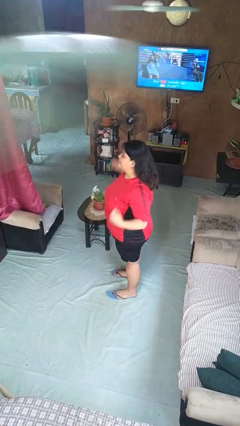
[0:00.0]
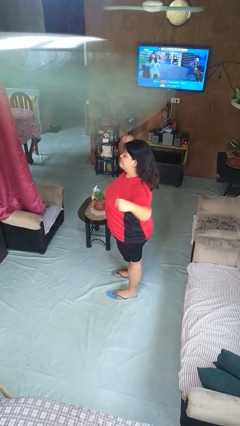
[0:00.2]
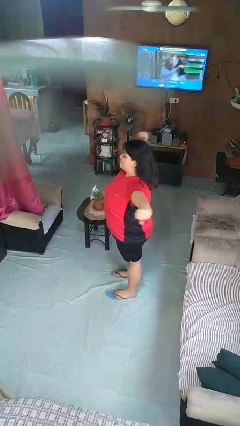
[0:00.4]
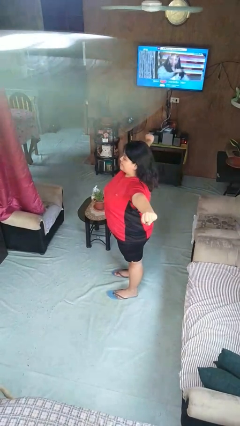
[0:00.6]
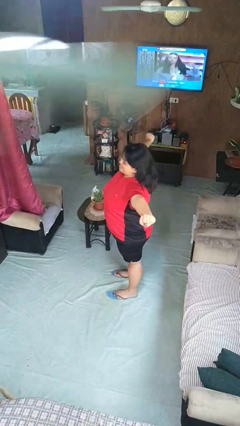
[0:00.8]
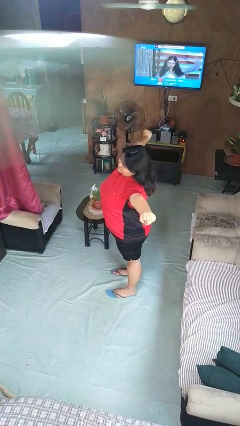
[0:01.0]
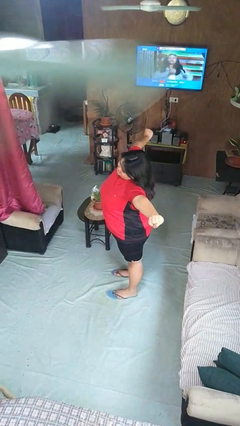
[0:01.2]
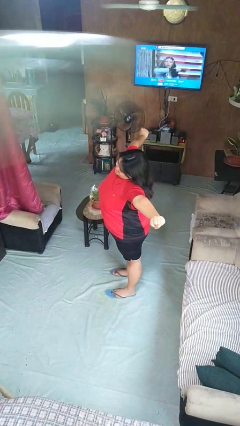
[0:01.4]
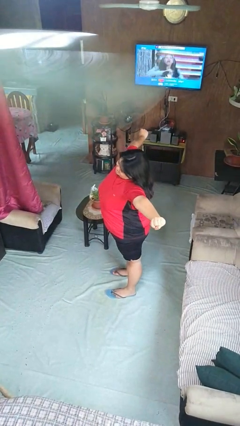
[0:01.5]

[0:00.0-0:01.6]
person stretches arms to side

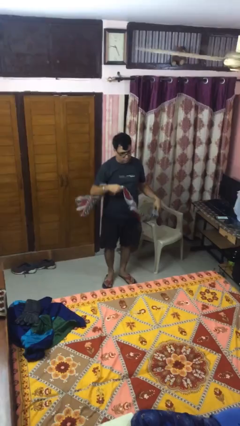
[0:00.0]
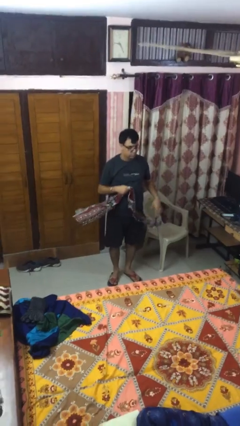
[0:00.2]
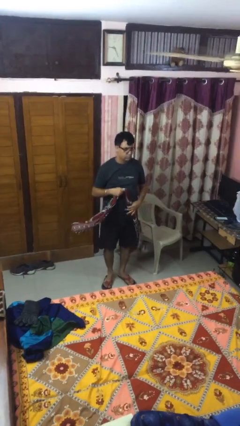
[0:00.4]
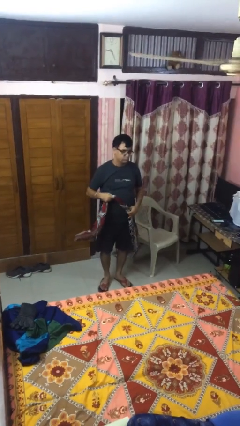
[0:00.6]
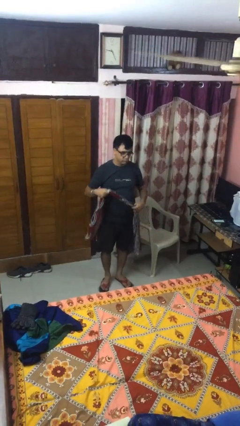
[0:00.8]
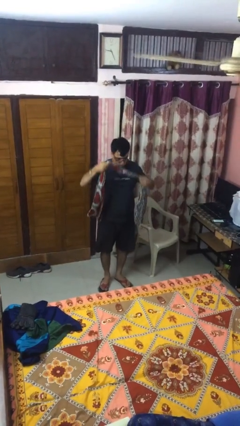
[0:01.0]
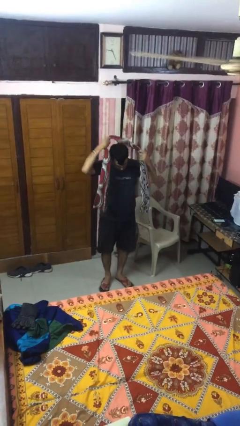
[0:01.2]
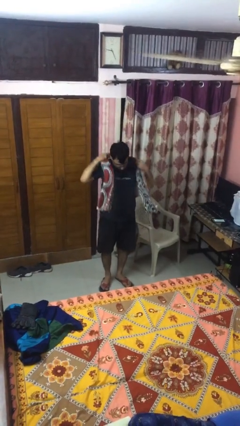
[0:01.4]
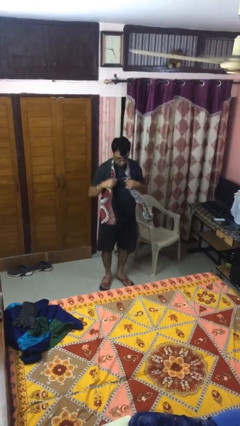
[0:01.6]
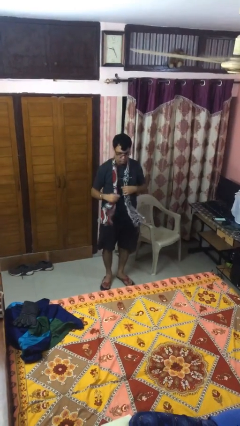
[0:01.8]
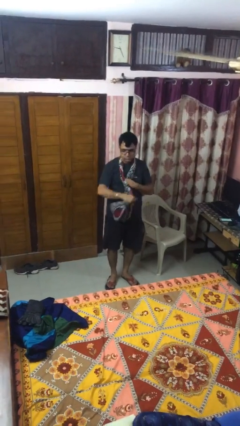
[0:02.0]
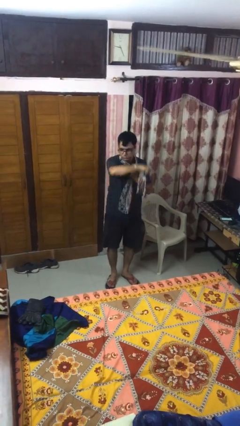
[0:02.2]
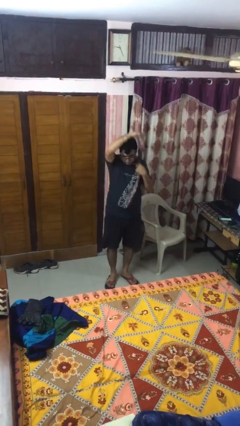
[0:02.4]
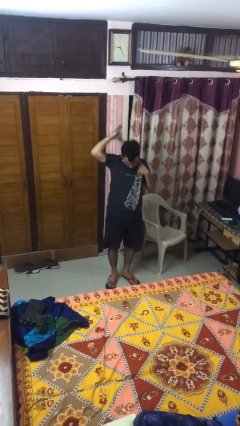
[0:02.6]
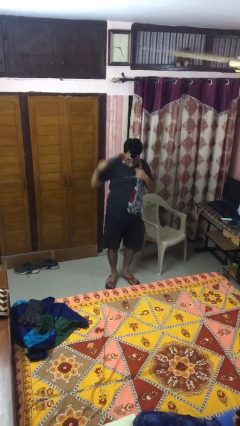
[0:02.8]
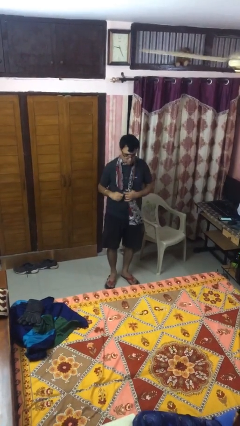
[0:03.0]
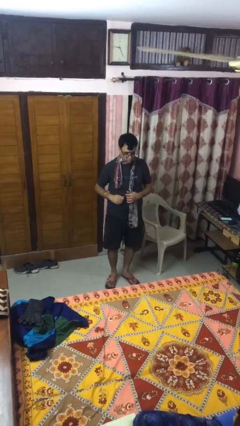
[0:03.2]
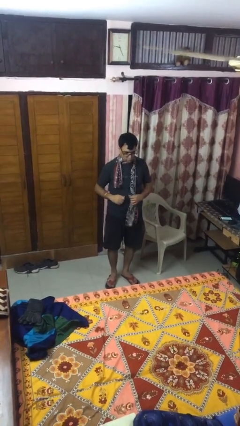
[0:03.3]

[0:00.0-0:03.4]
person puts on scarf

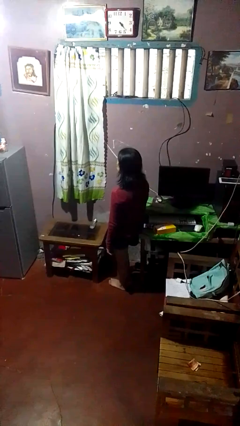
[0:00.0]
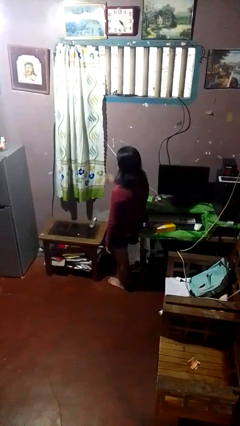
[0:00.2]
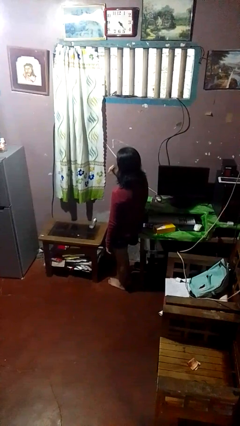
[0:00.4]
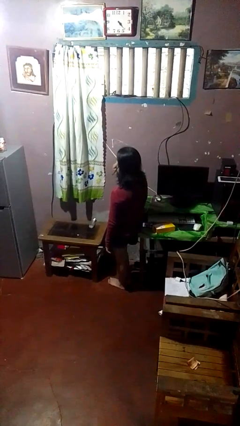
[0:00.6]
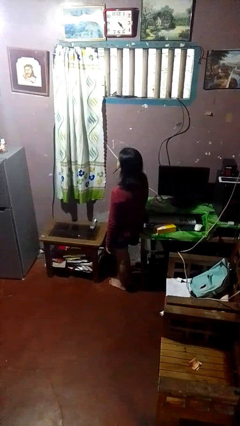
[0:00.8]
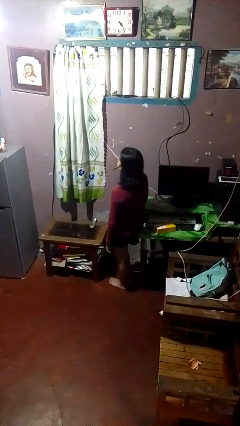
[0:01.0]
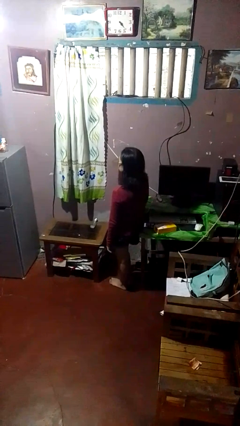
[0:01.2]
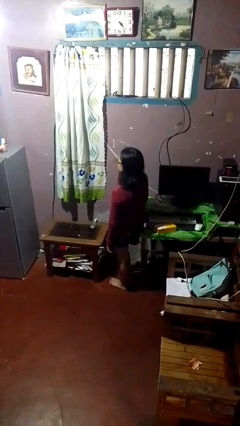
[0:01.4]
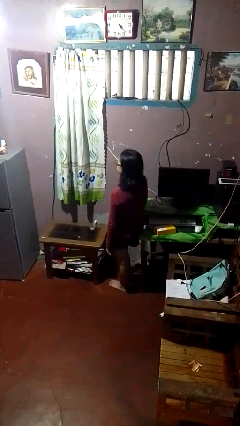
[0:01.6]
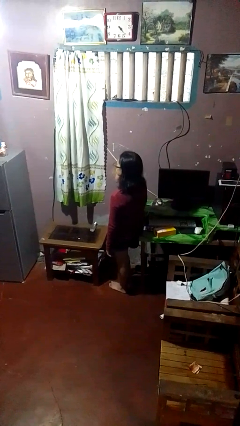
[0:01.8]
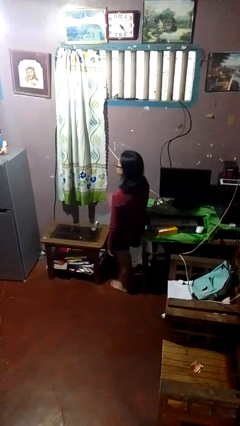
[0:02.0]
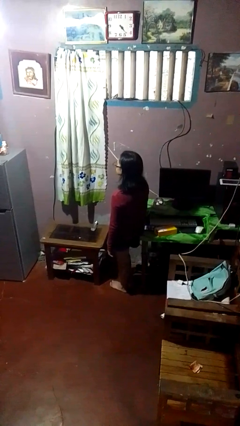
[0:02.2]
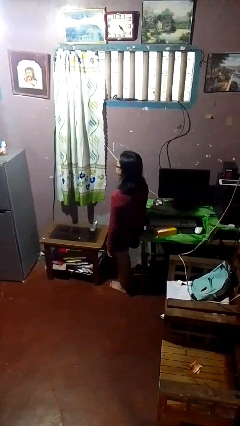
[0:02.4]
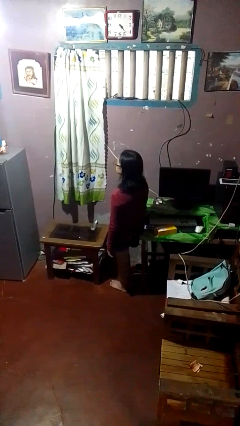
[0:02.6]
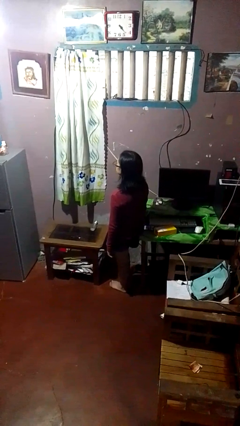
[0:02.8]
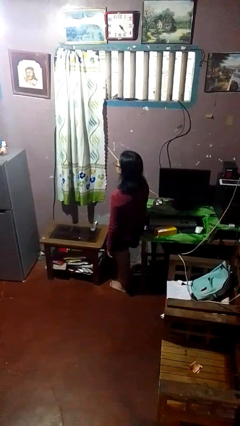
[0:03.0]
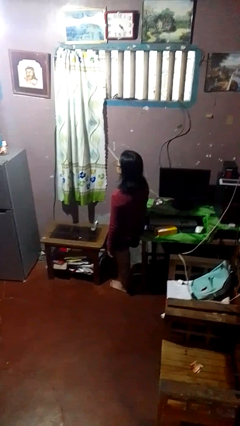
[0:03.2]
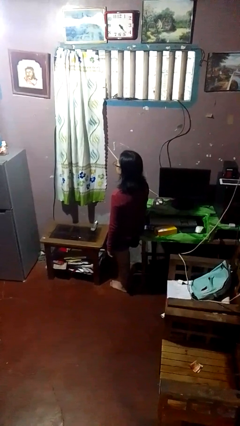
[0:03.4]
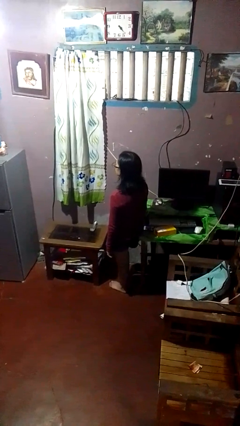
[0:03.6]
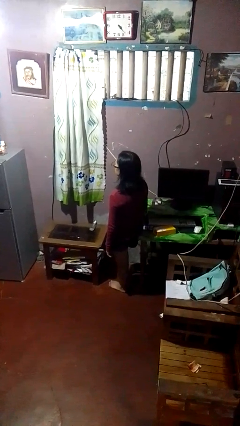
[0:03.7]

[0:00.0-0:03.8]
person puts on glasses

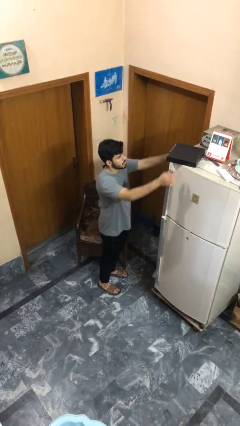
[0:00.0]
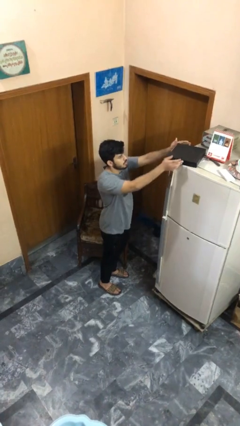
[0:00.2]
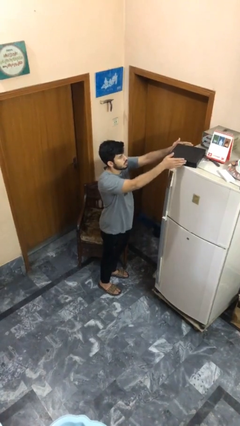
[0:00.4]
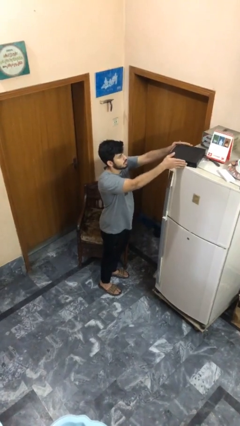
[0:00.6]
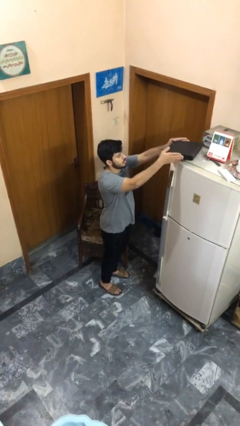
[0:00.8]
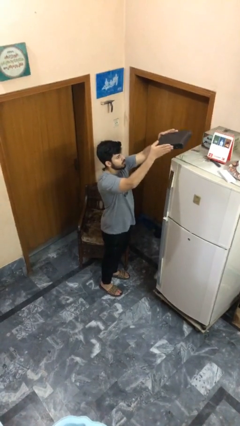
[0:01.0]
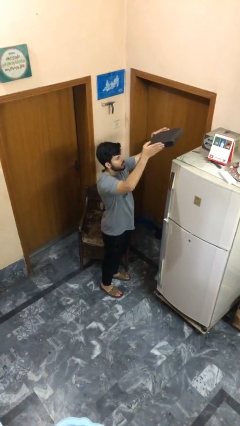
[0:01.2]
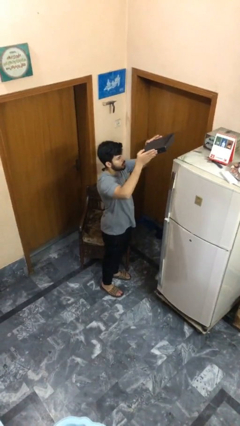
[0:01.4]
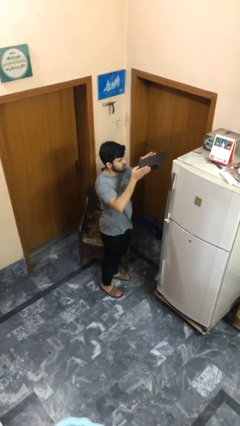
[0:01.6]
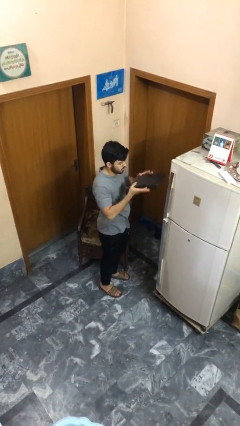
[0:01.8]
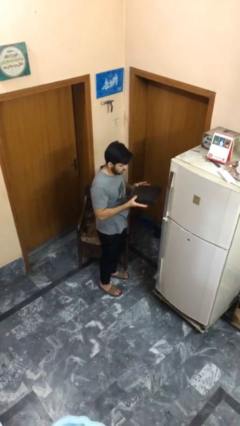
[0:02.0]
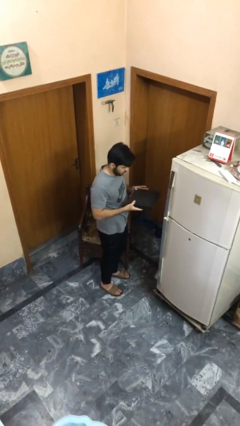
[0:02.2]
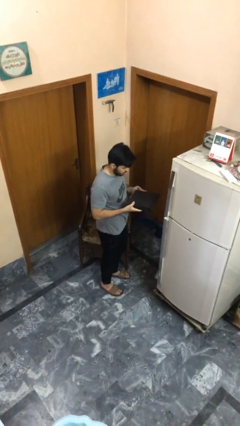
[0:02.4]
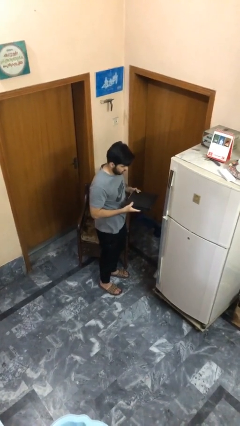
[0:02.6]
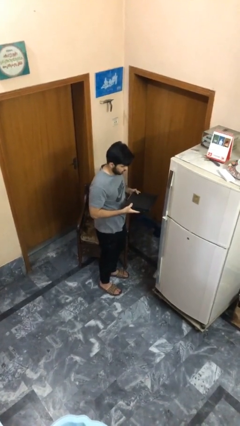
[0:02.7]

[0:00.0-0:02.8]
person picks up object from countertop

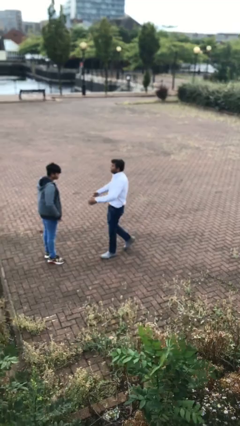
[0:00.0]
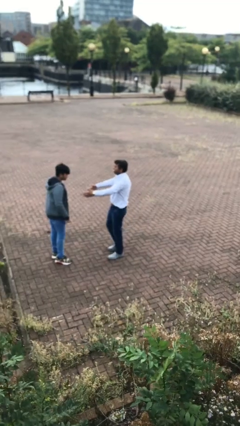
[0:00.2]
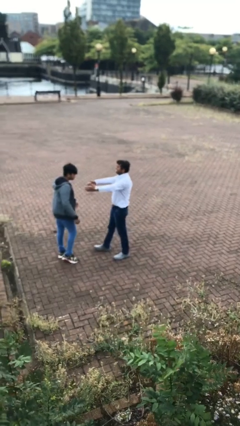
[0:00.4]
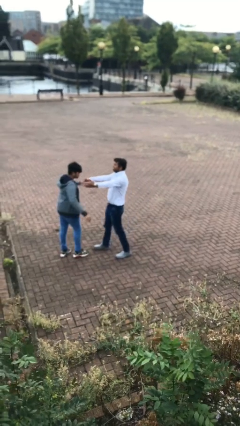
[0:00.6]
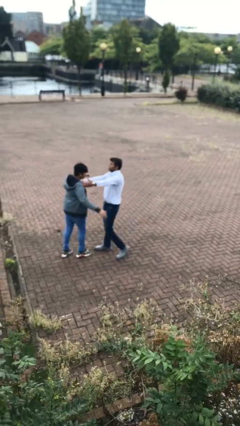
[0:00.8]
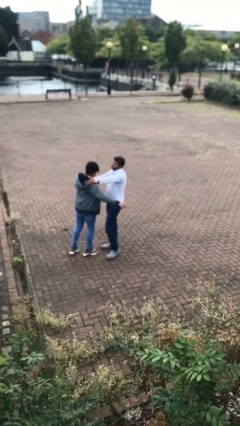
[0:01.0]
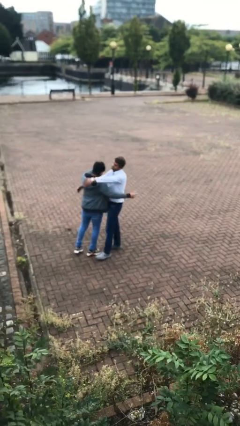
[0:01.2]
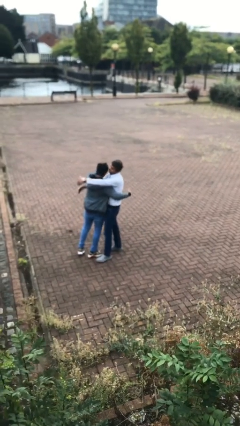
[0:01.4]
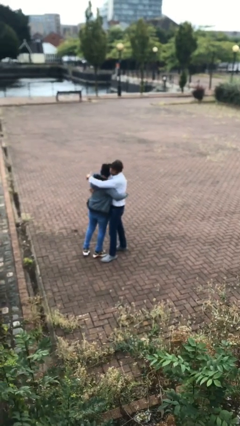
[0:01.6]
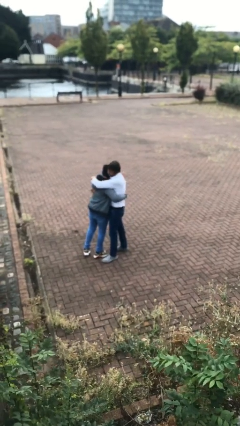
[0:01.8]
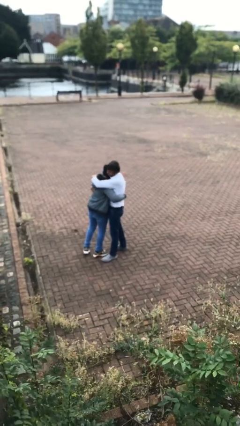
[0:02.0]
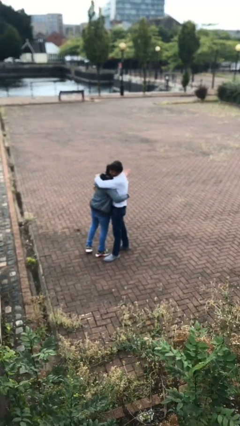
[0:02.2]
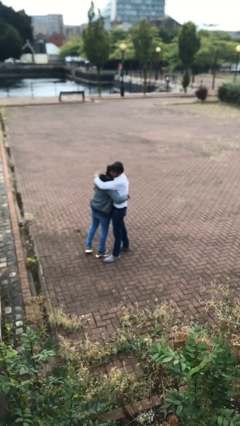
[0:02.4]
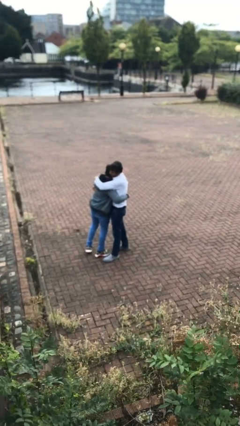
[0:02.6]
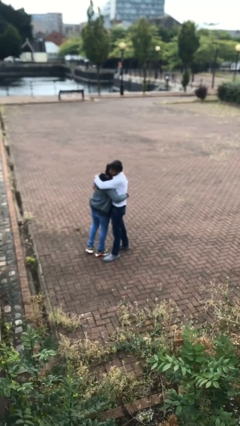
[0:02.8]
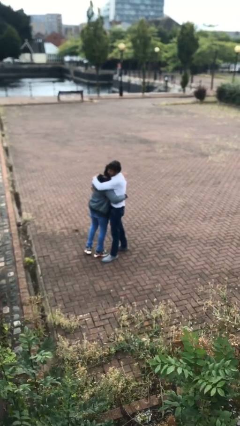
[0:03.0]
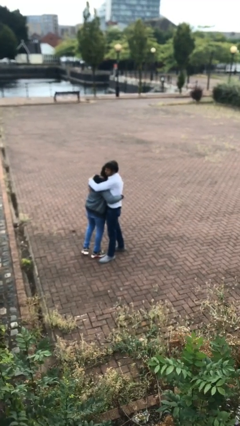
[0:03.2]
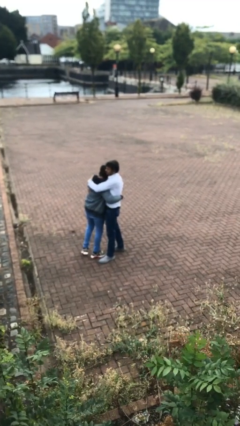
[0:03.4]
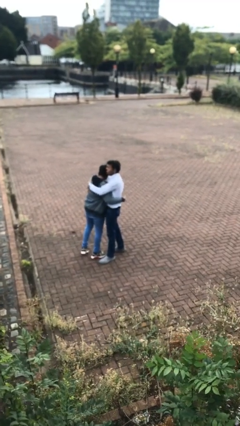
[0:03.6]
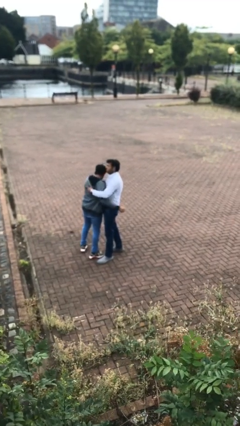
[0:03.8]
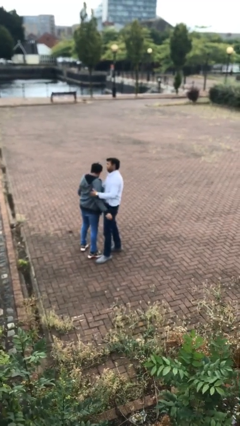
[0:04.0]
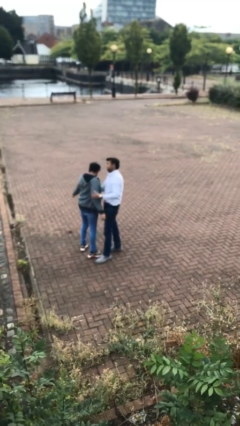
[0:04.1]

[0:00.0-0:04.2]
person embraces person

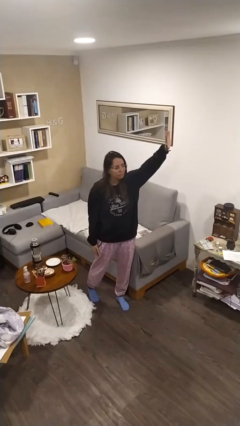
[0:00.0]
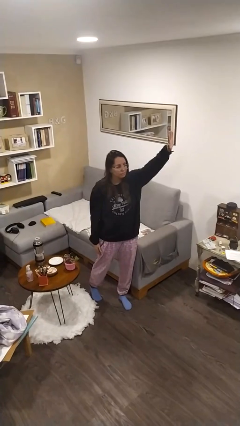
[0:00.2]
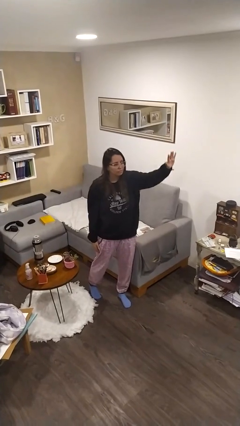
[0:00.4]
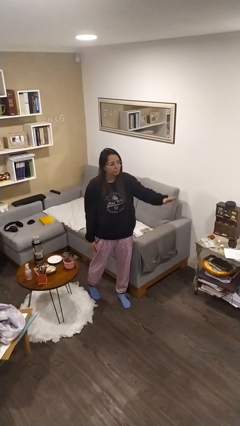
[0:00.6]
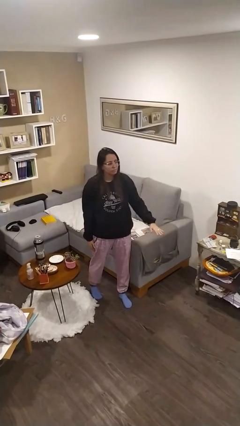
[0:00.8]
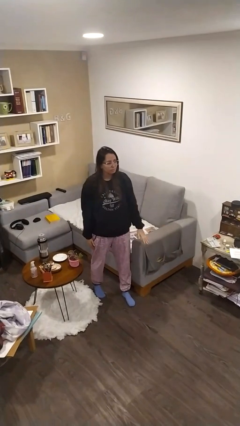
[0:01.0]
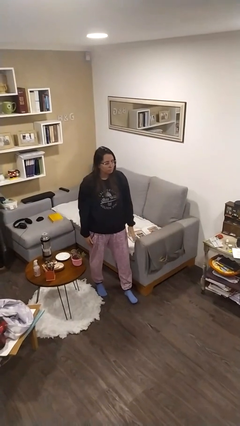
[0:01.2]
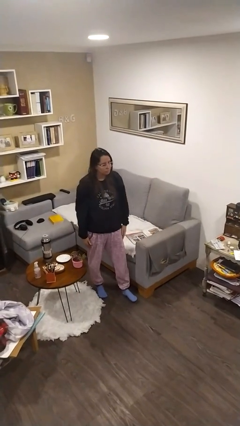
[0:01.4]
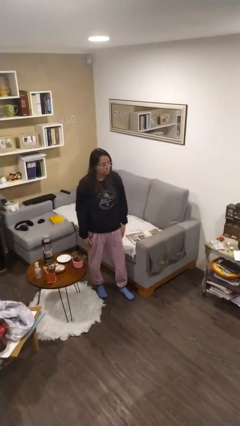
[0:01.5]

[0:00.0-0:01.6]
person gestures lower hand
